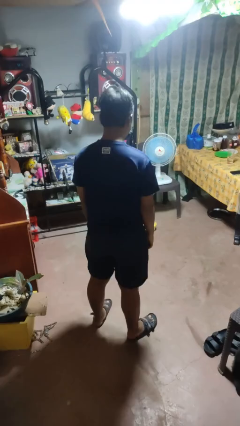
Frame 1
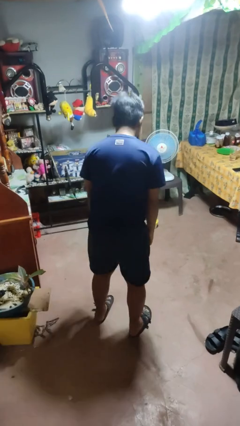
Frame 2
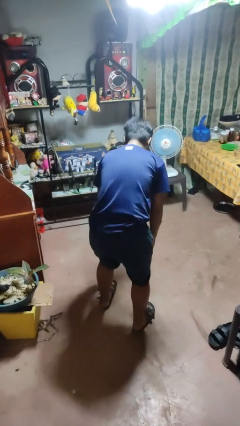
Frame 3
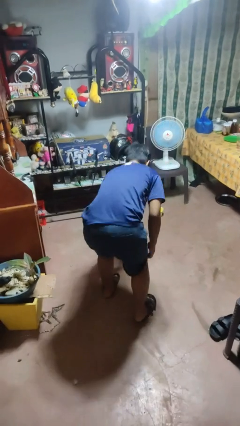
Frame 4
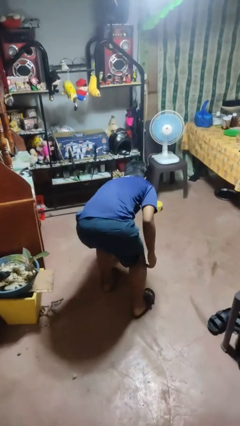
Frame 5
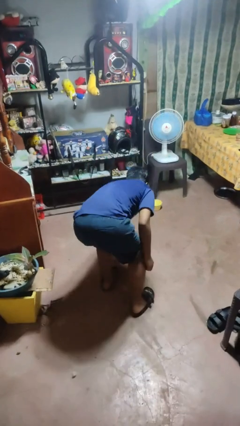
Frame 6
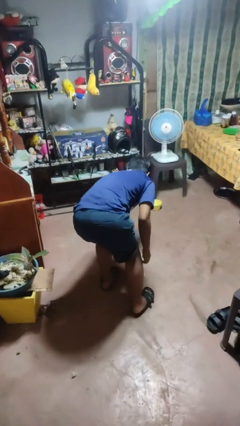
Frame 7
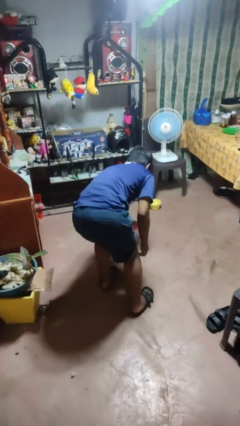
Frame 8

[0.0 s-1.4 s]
person picks up object from floor

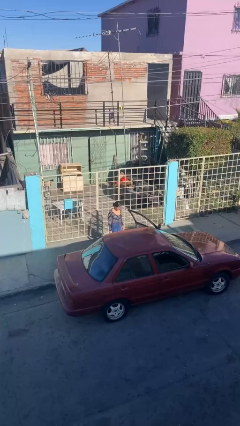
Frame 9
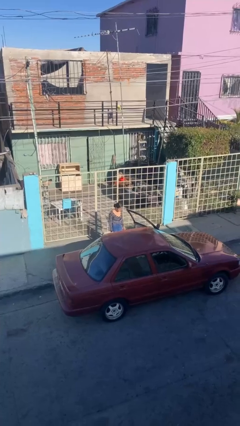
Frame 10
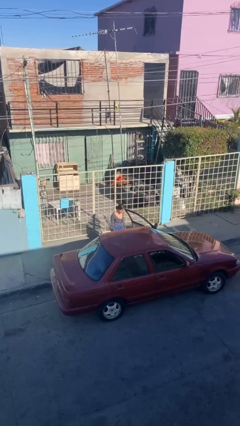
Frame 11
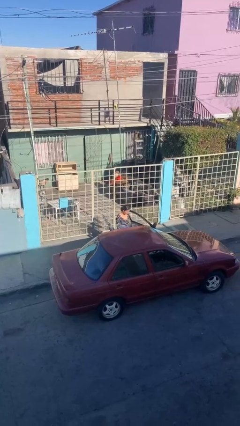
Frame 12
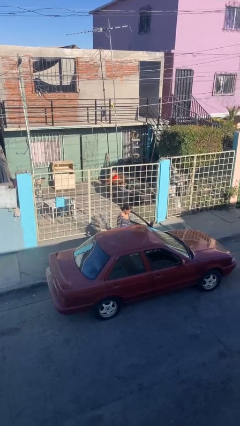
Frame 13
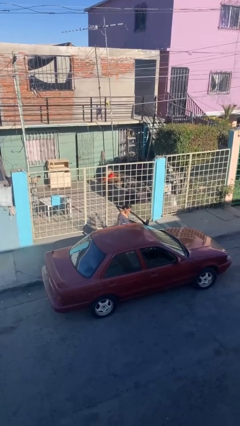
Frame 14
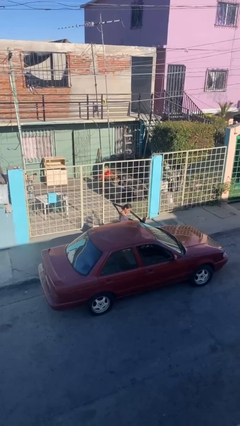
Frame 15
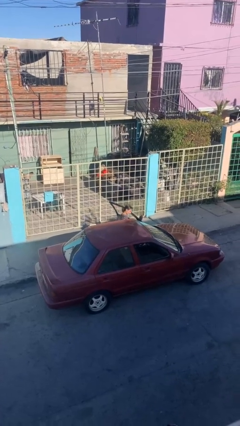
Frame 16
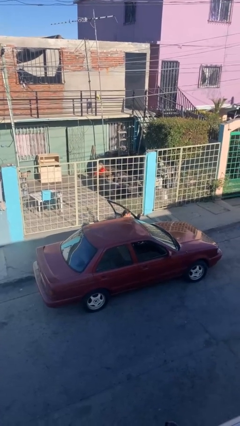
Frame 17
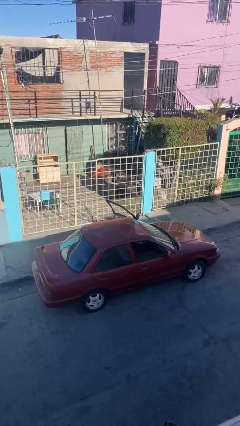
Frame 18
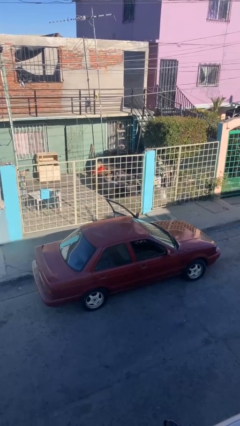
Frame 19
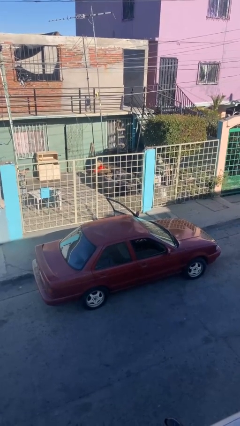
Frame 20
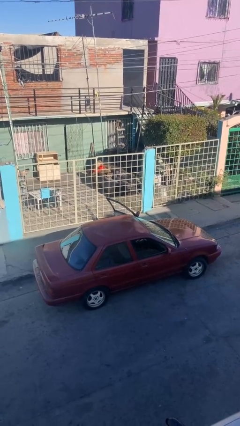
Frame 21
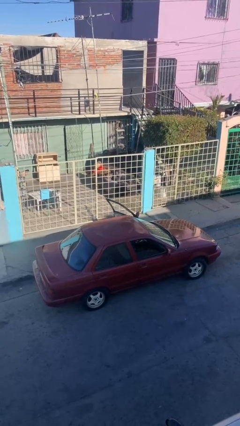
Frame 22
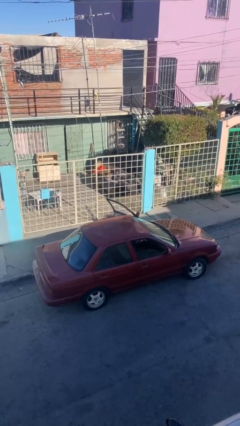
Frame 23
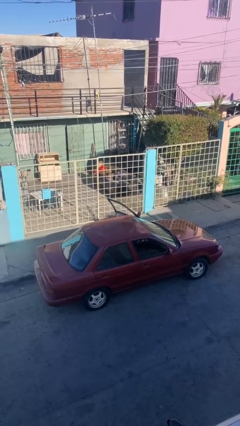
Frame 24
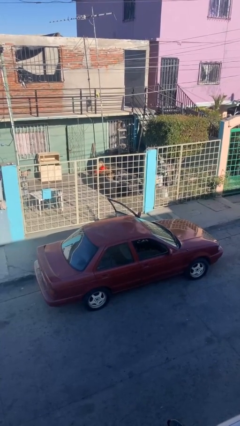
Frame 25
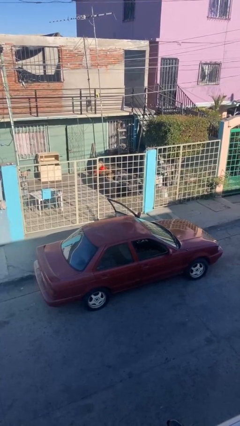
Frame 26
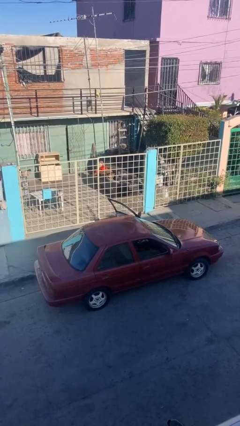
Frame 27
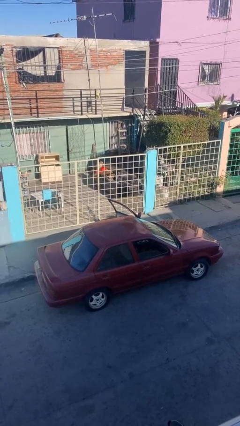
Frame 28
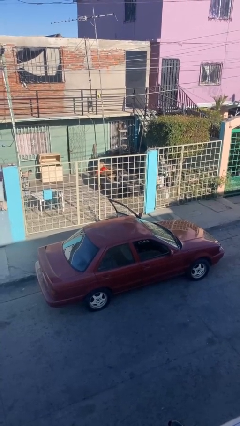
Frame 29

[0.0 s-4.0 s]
person enters car

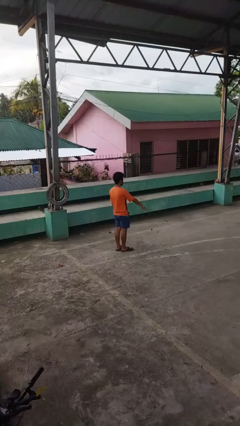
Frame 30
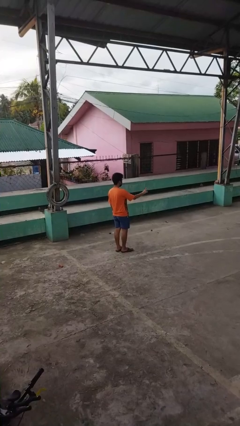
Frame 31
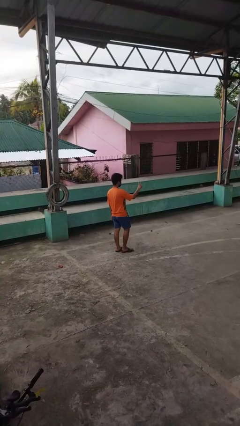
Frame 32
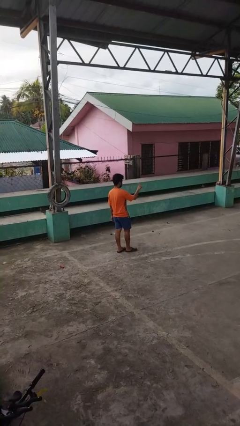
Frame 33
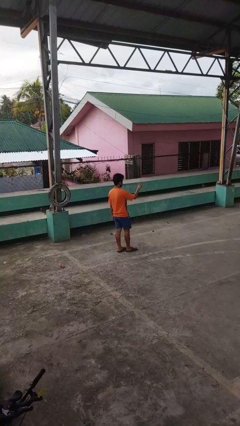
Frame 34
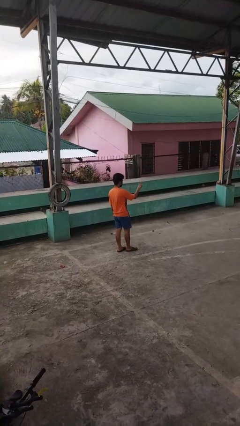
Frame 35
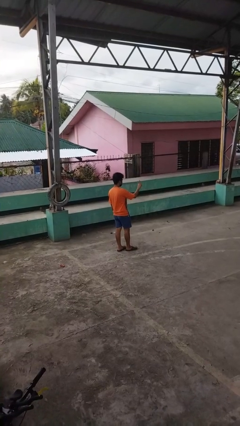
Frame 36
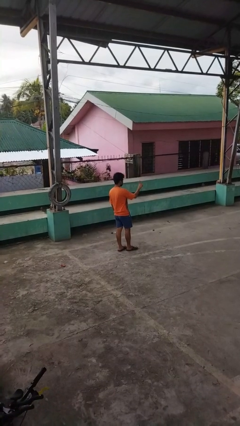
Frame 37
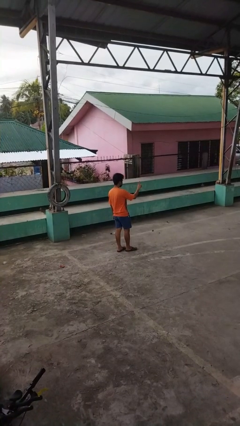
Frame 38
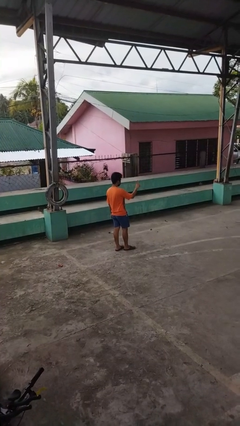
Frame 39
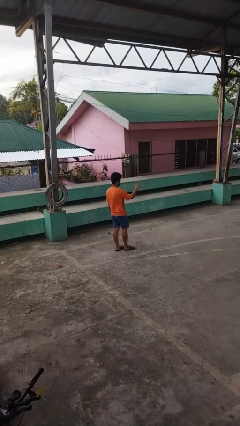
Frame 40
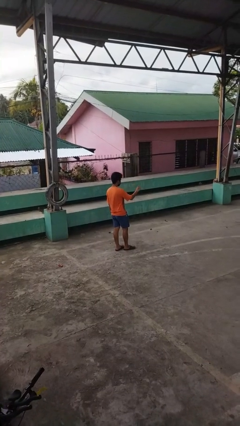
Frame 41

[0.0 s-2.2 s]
person gestures peace

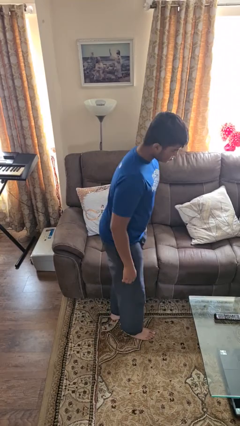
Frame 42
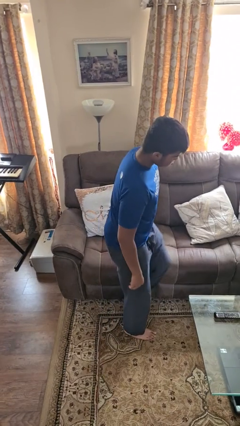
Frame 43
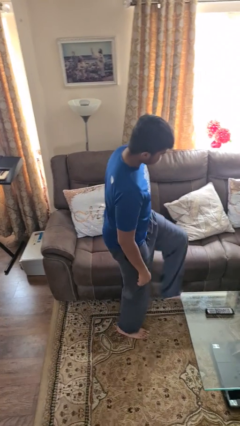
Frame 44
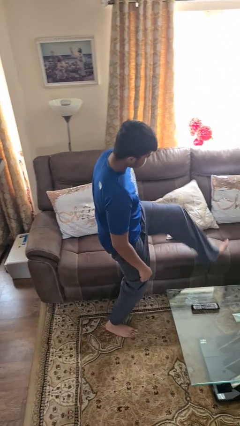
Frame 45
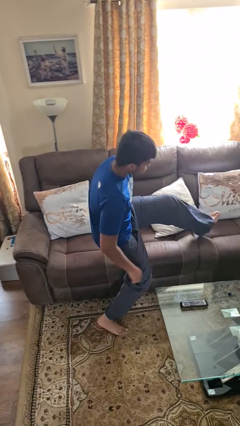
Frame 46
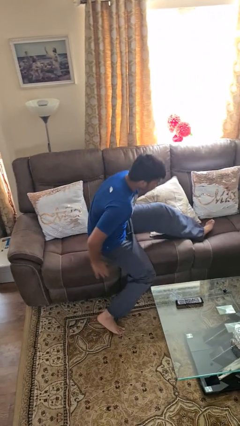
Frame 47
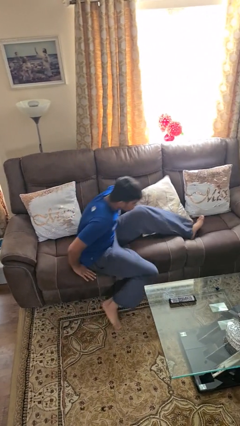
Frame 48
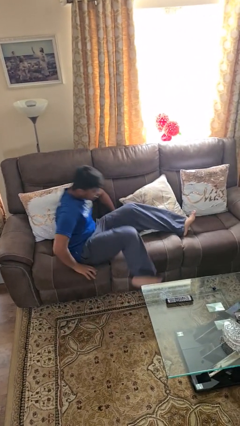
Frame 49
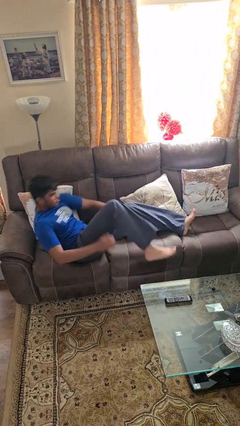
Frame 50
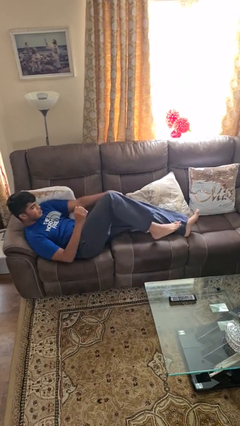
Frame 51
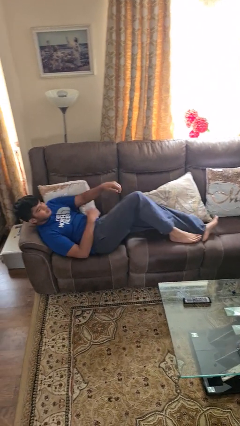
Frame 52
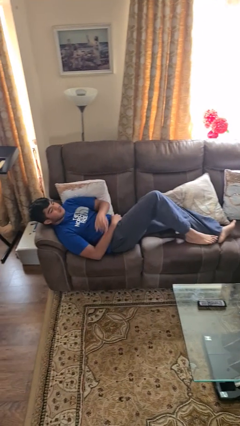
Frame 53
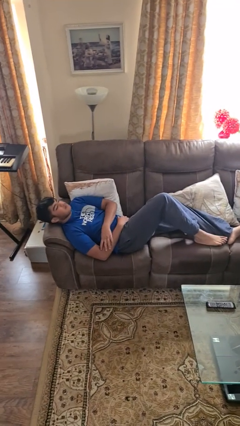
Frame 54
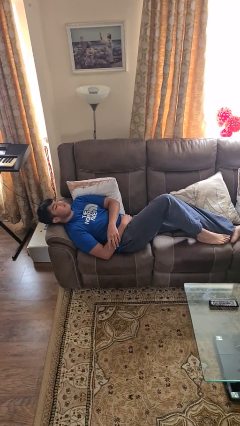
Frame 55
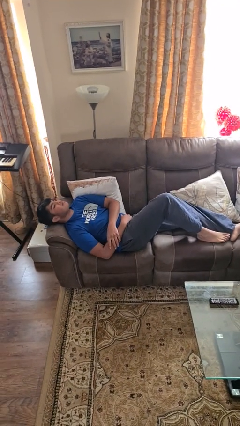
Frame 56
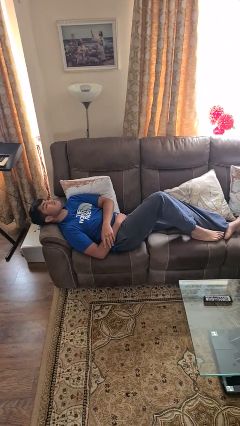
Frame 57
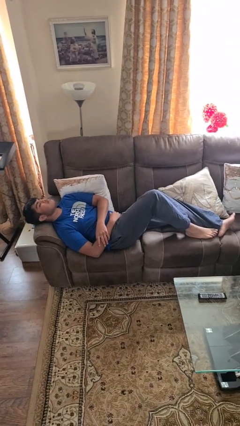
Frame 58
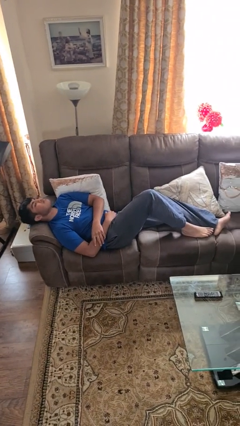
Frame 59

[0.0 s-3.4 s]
person lies down on couch

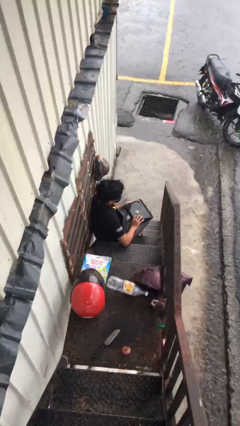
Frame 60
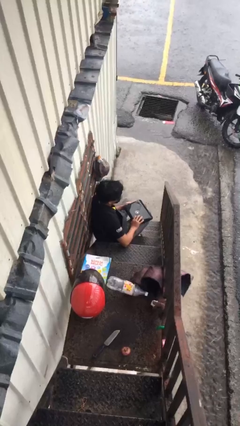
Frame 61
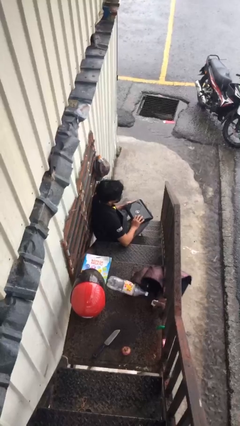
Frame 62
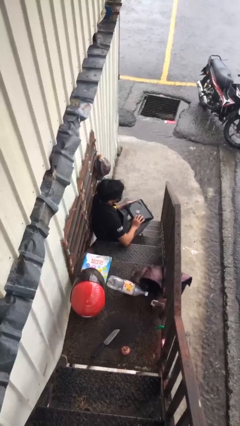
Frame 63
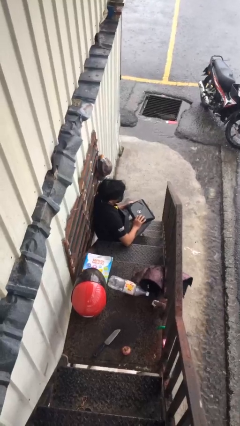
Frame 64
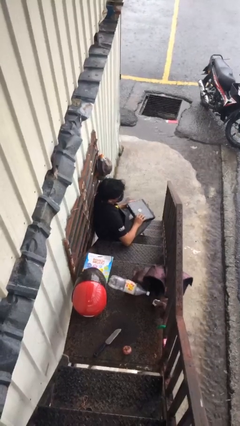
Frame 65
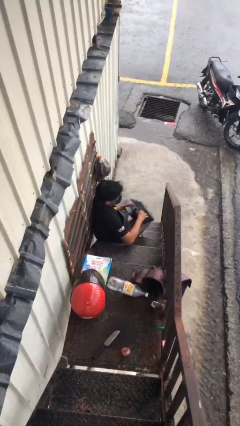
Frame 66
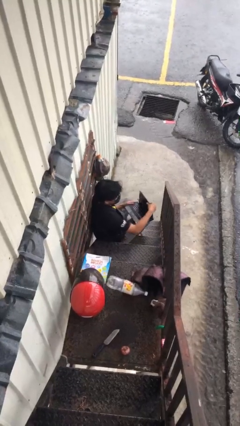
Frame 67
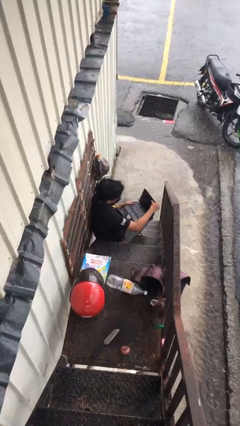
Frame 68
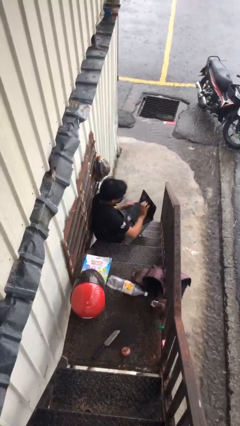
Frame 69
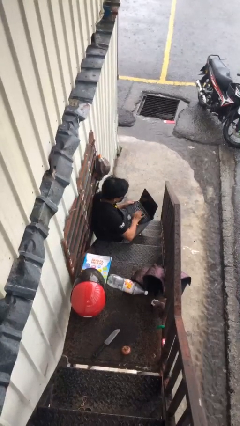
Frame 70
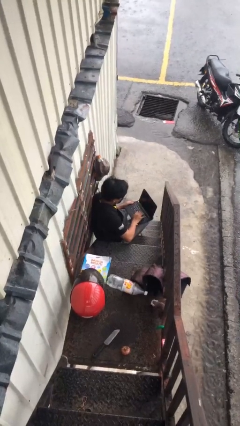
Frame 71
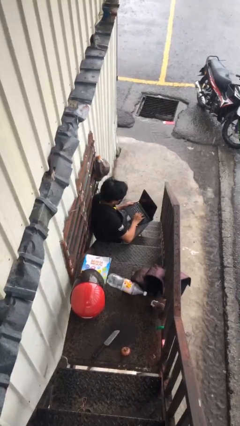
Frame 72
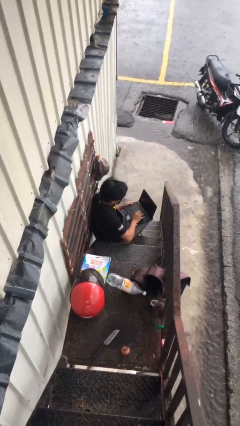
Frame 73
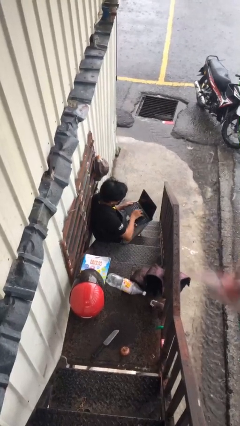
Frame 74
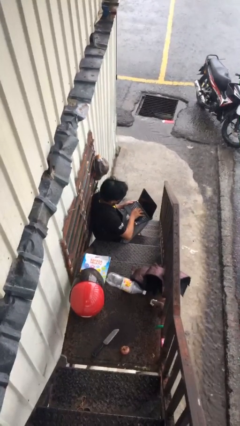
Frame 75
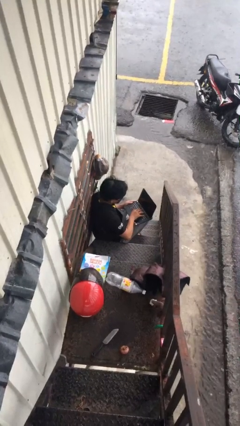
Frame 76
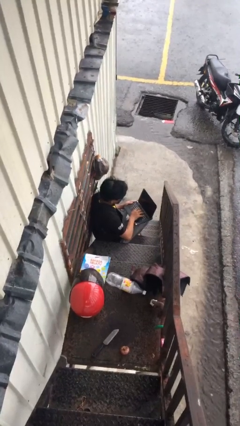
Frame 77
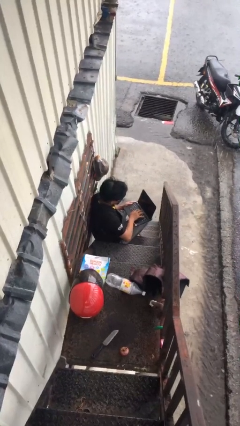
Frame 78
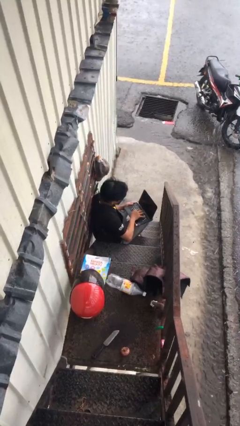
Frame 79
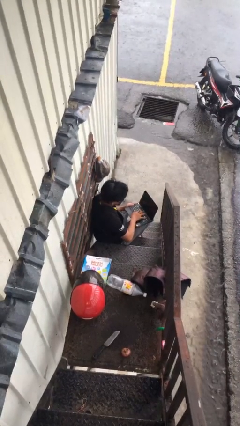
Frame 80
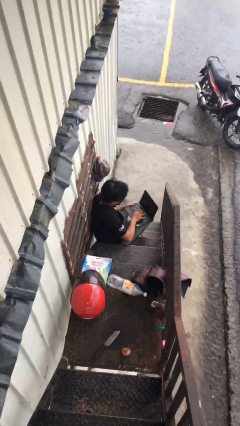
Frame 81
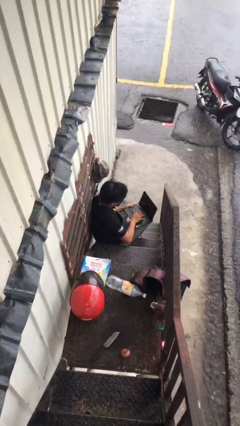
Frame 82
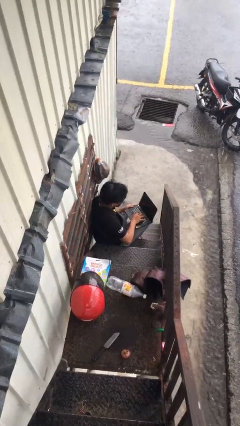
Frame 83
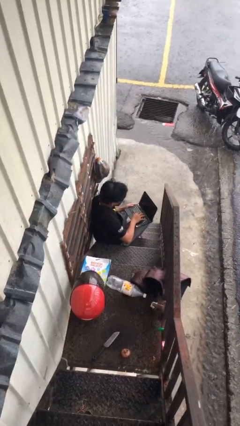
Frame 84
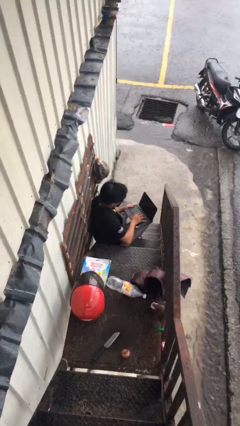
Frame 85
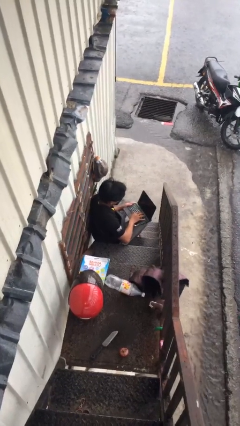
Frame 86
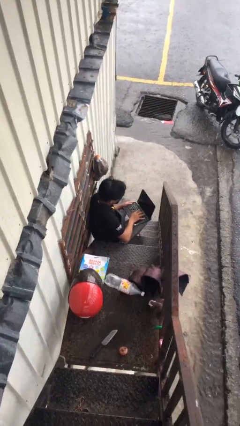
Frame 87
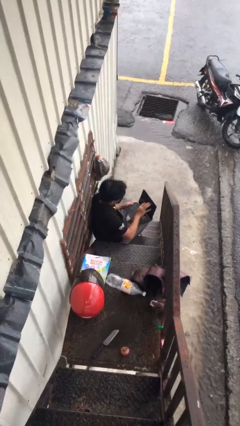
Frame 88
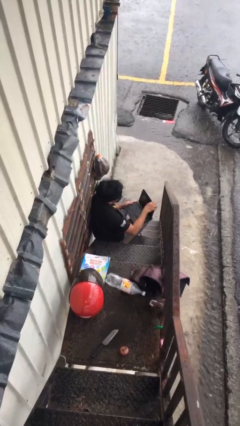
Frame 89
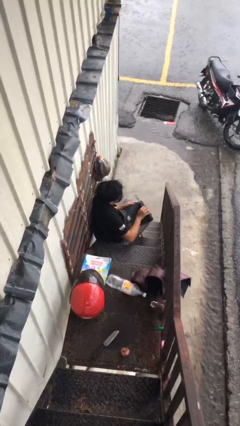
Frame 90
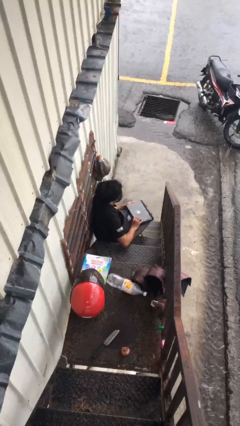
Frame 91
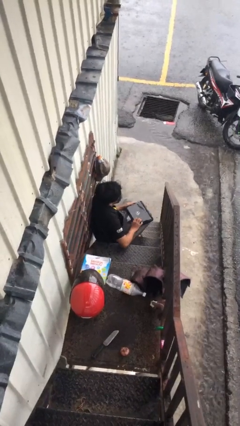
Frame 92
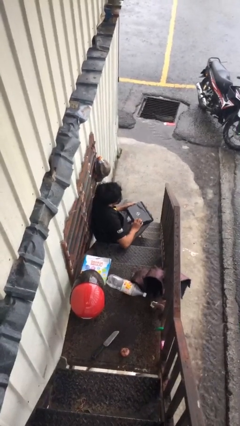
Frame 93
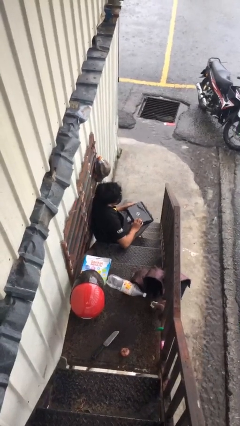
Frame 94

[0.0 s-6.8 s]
person interacts with laptop
